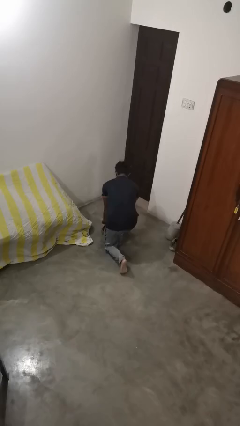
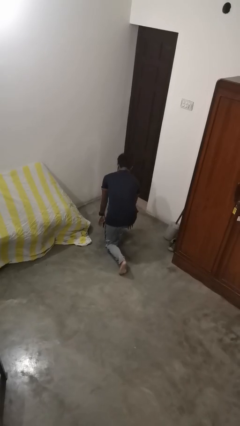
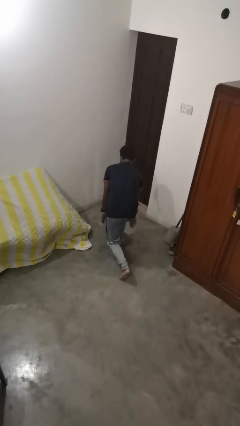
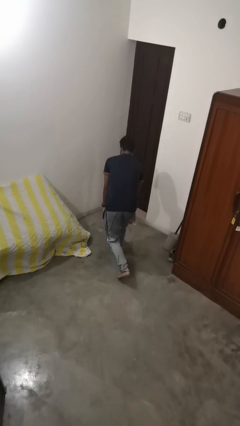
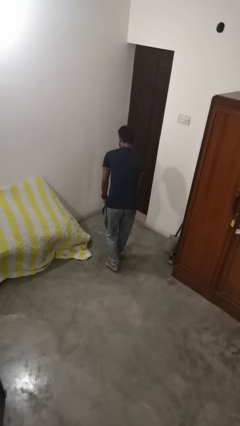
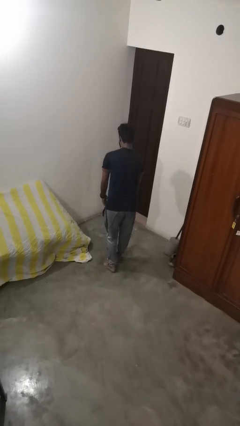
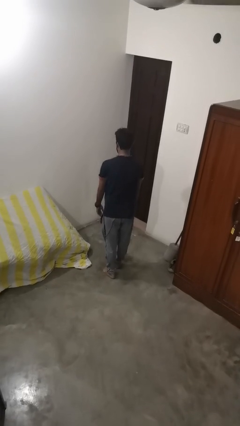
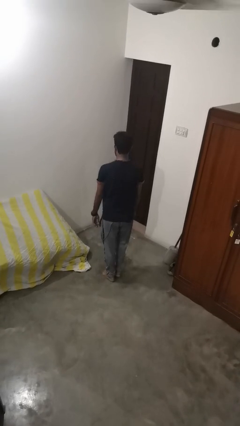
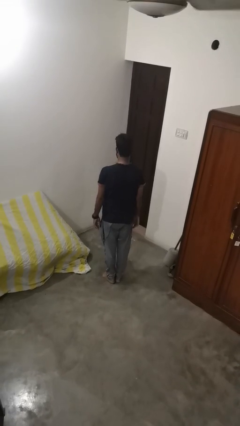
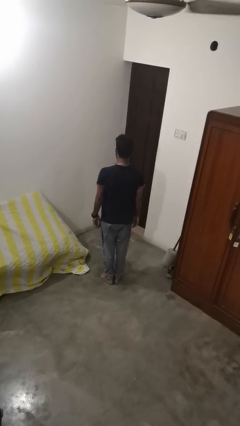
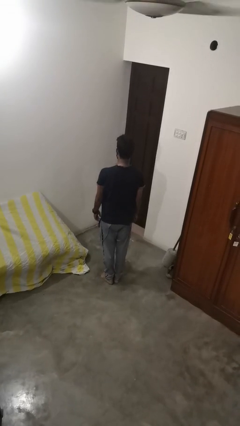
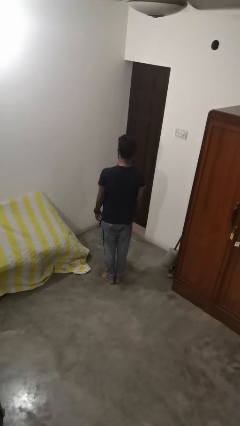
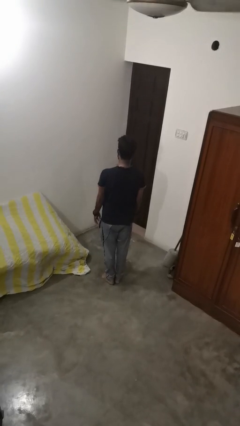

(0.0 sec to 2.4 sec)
person stands up from floor

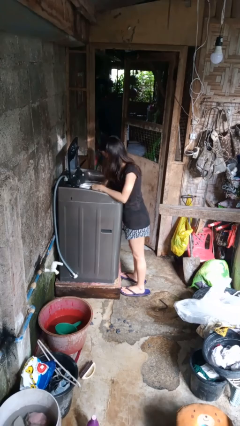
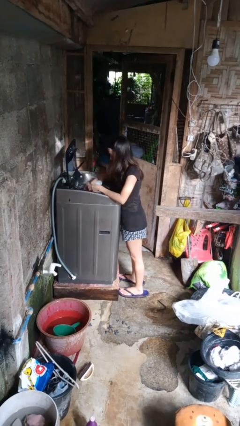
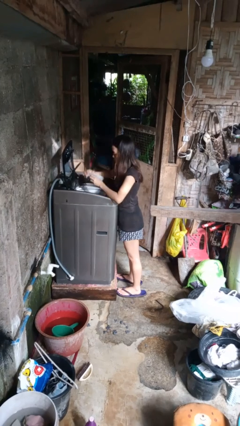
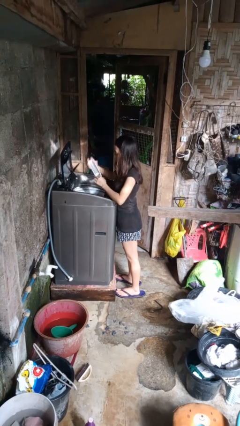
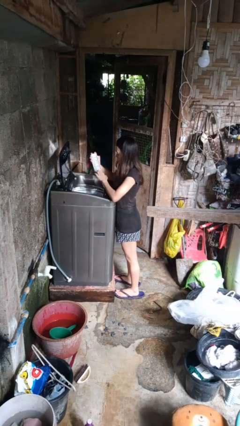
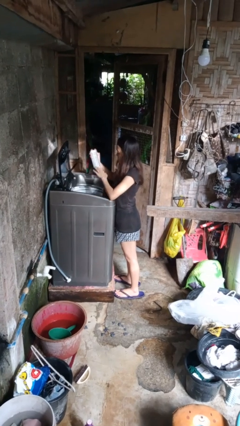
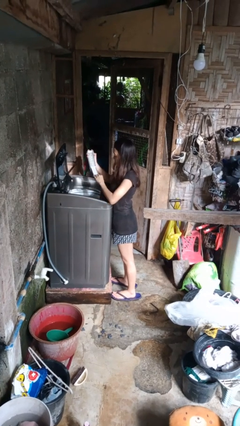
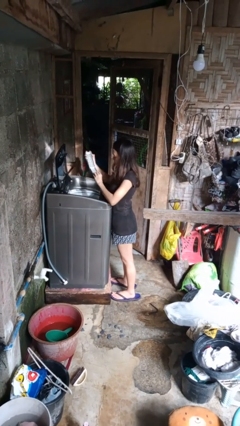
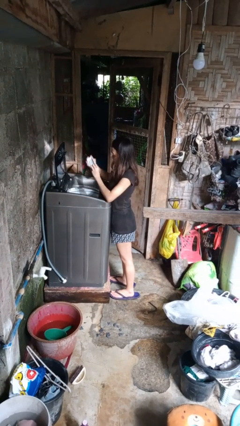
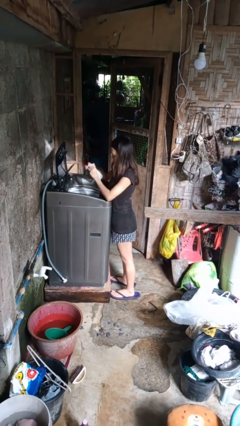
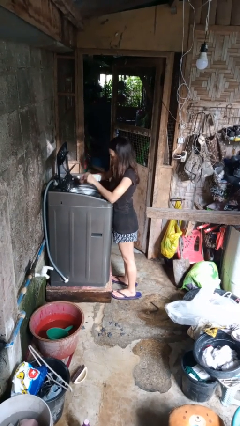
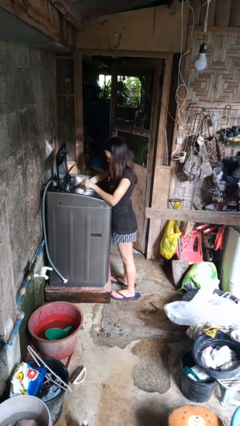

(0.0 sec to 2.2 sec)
person cleans dryer lint trap

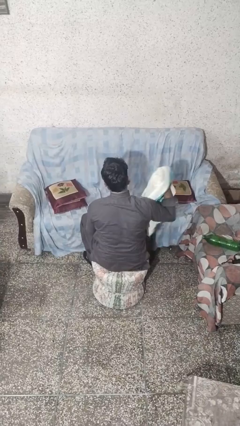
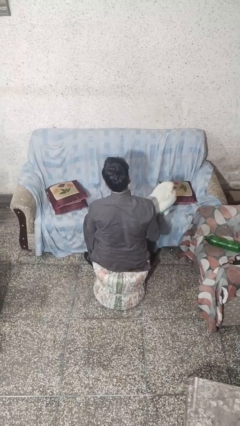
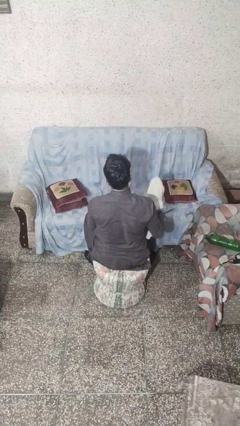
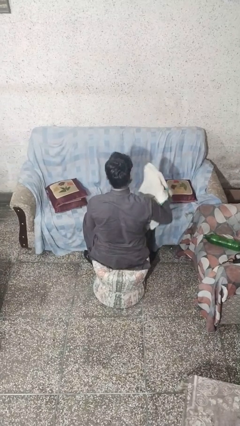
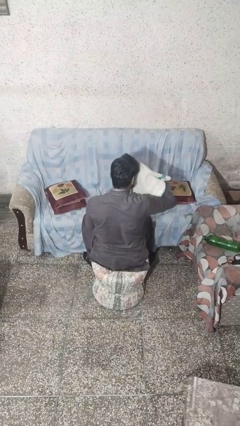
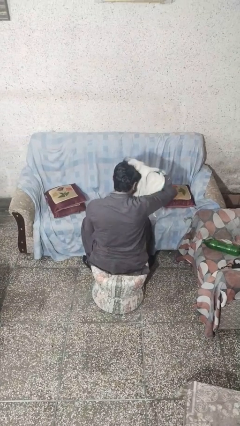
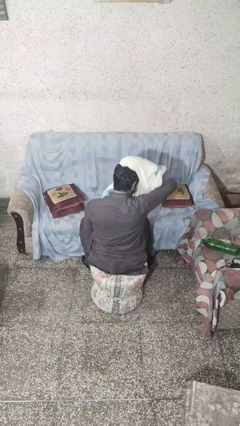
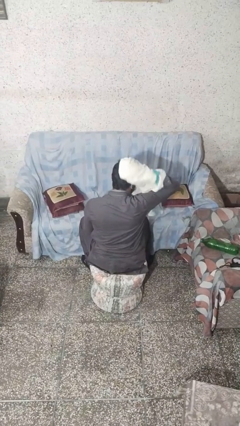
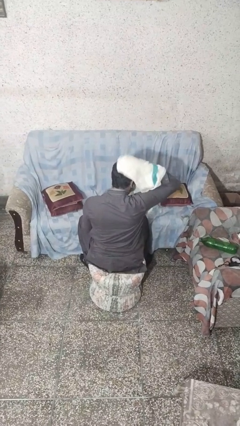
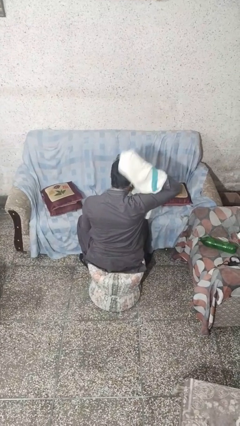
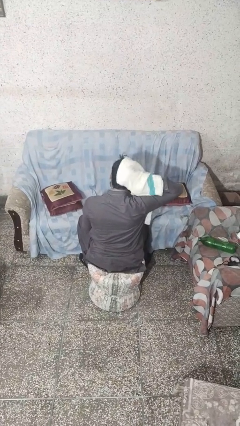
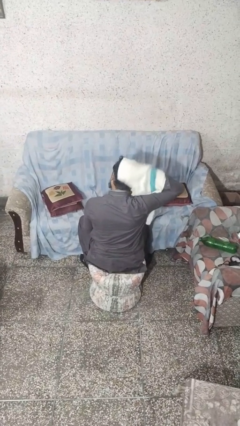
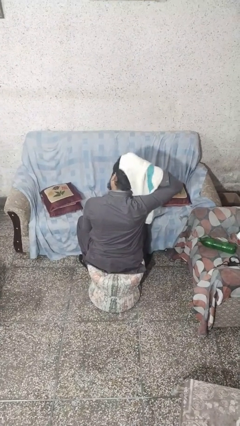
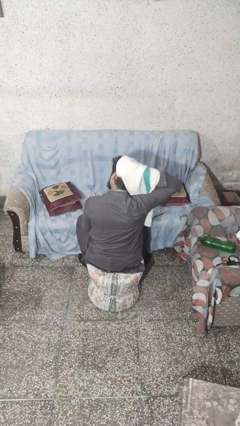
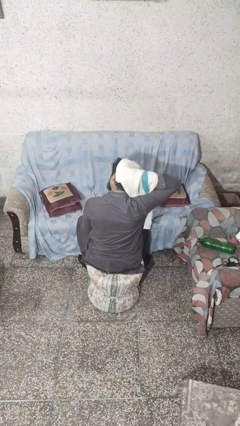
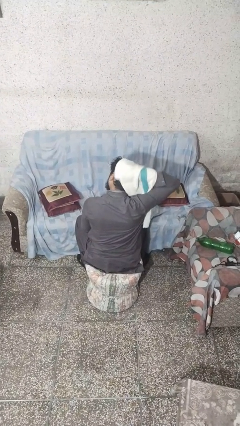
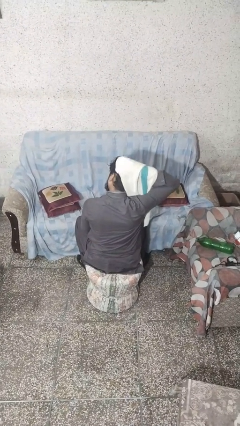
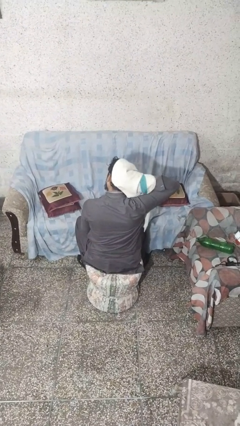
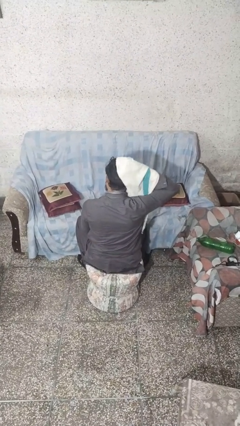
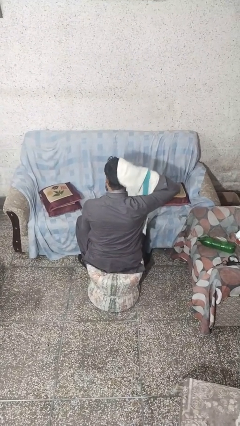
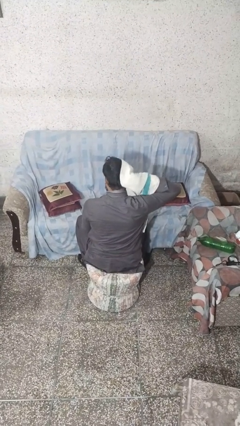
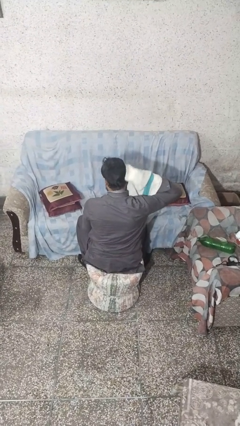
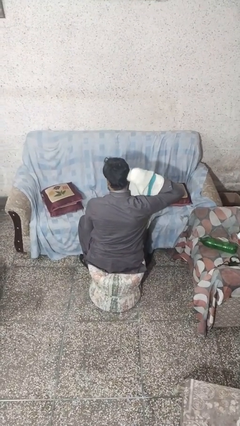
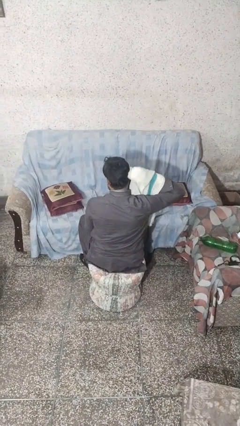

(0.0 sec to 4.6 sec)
person dries hair with towel

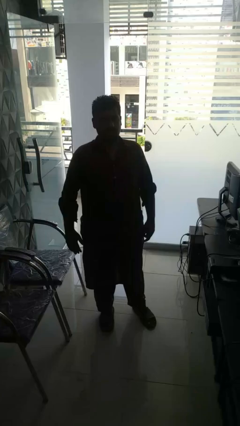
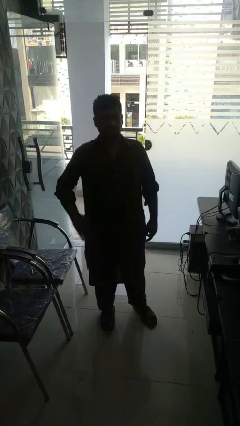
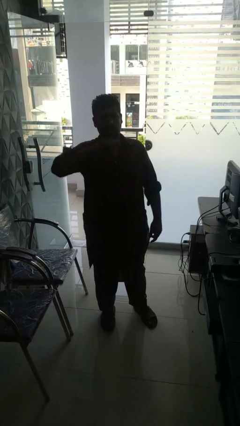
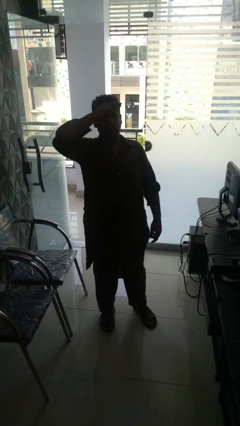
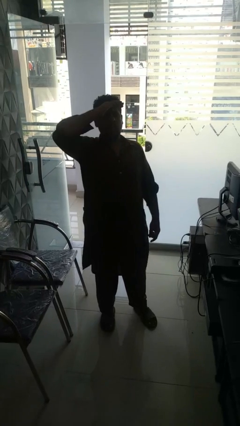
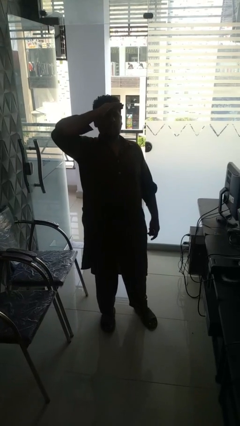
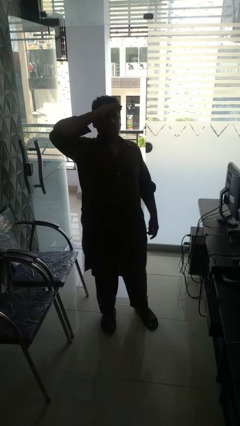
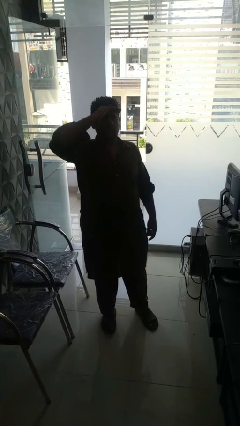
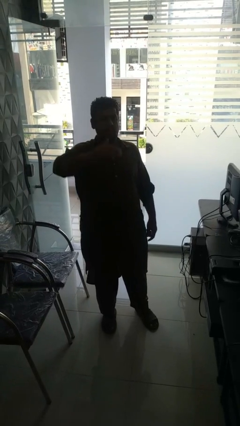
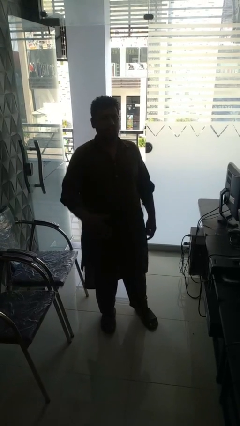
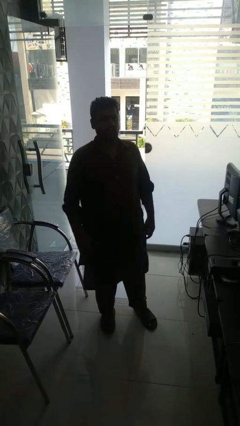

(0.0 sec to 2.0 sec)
person shades eyes

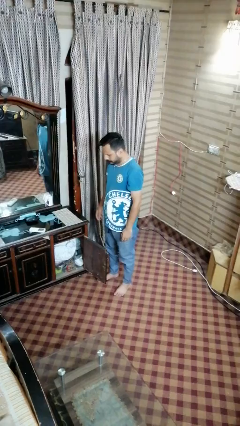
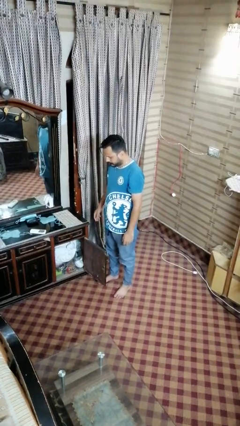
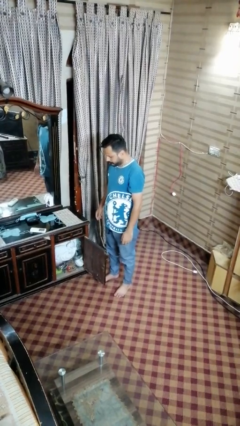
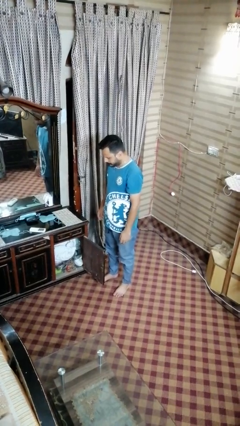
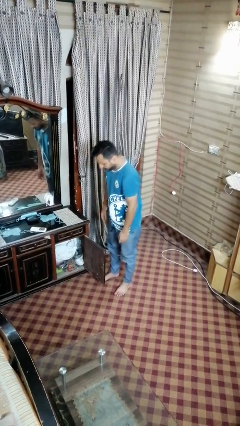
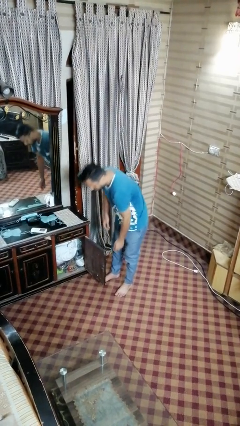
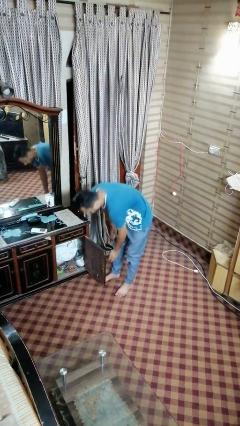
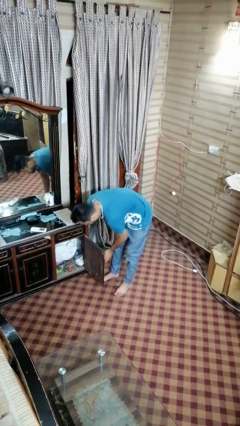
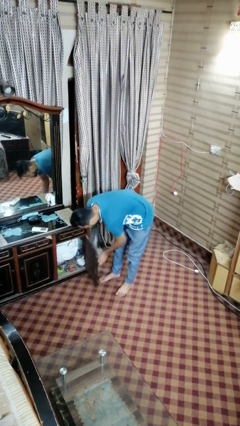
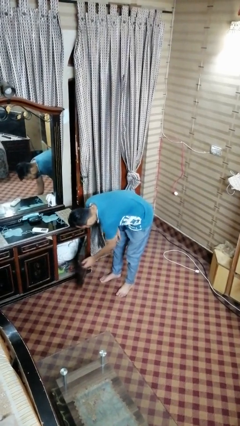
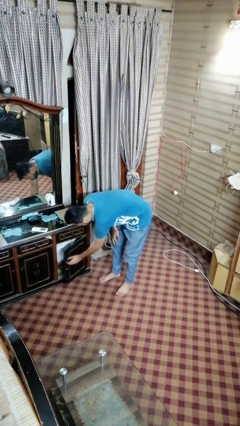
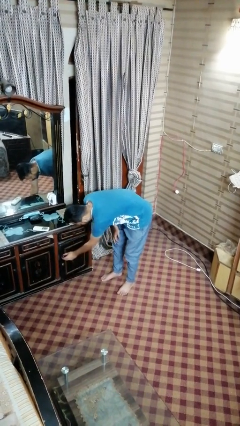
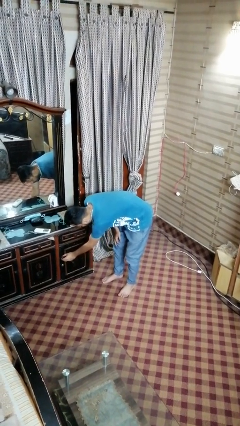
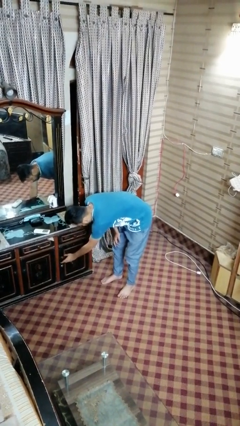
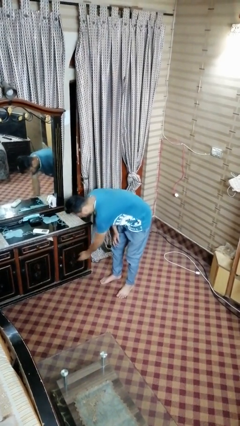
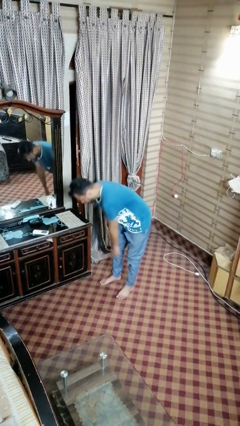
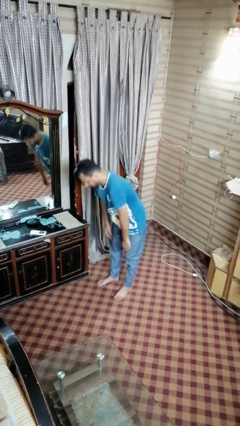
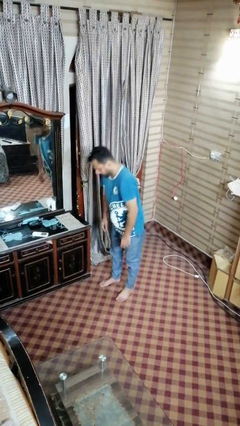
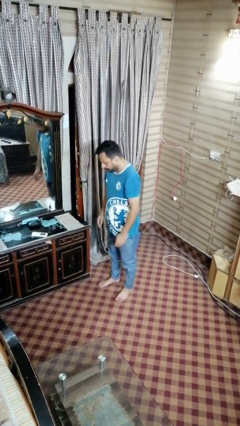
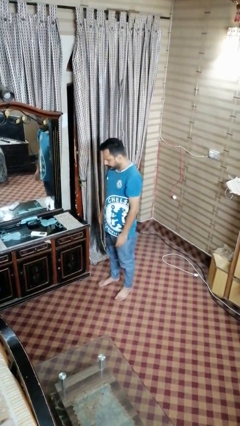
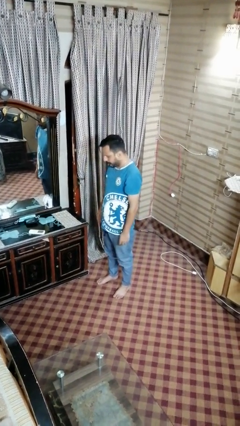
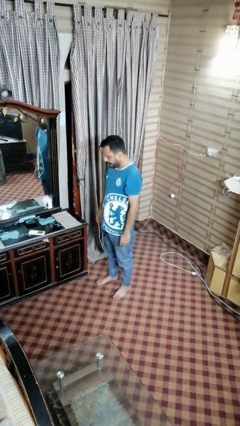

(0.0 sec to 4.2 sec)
person closes dresser drawer

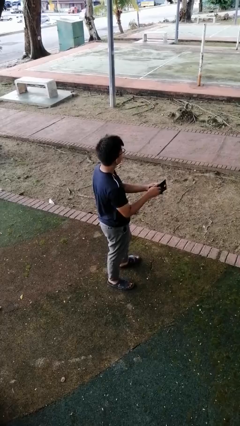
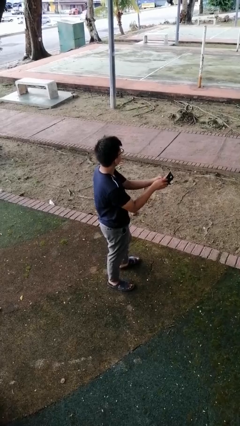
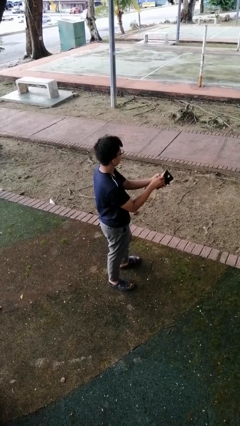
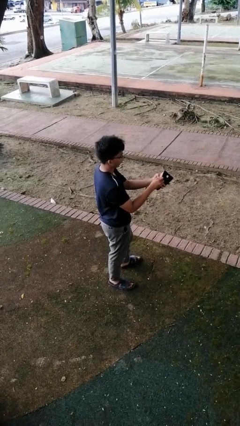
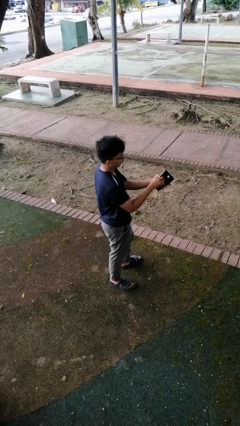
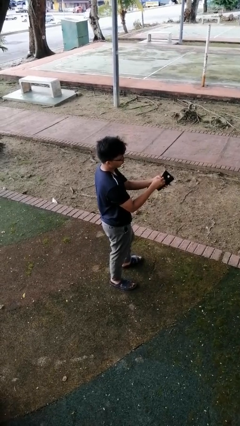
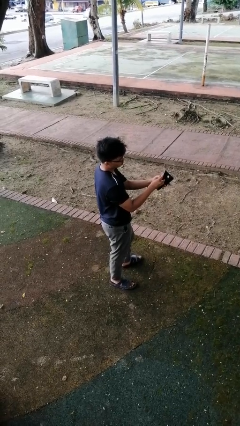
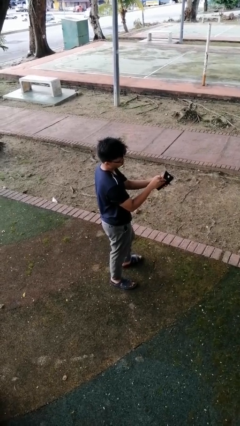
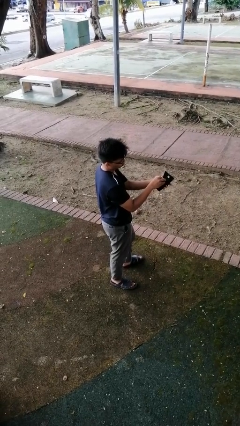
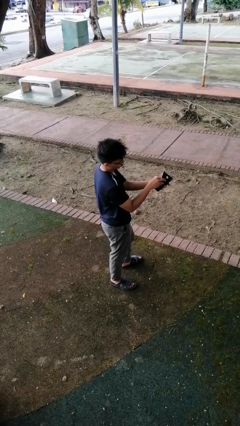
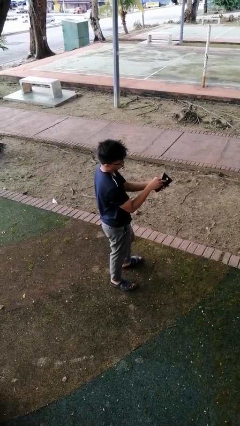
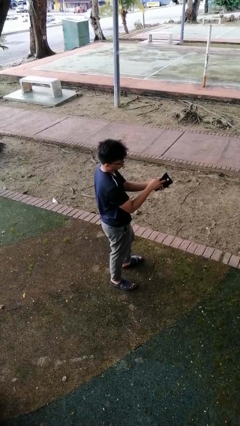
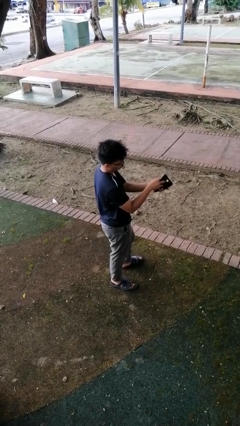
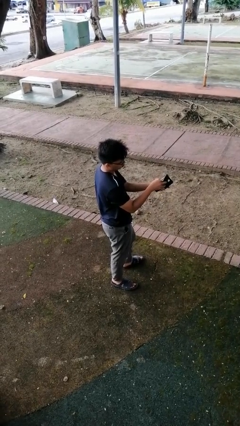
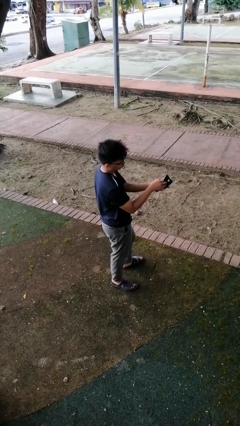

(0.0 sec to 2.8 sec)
person searches in purse
